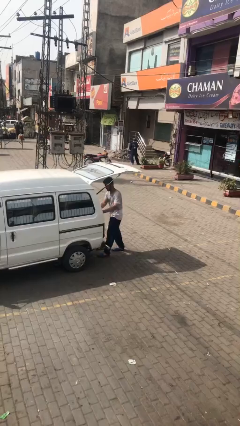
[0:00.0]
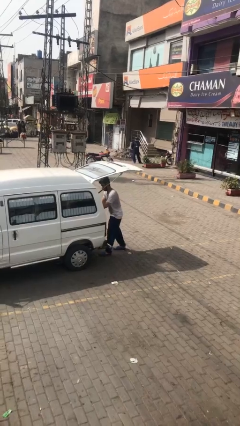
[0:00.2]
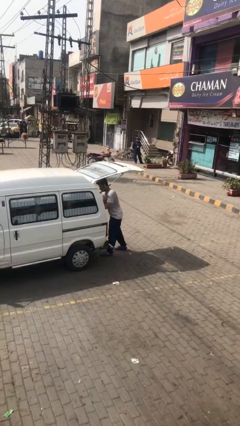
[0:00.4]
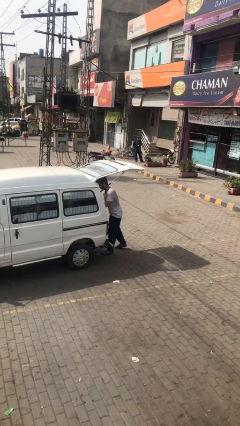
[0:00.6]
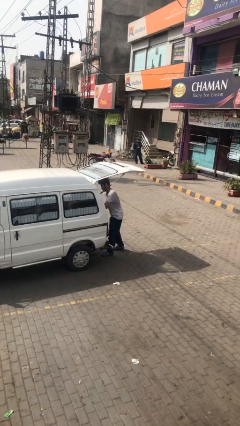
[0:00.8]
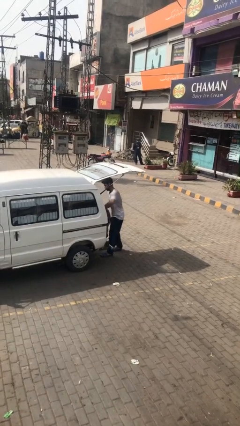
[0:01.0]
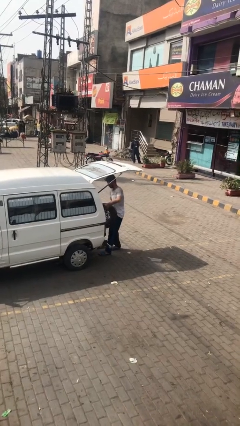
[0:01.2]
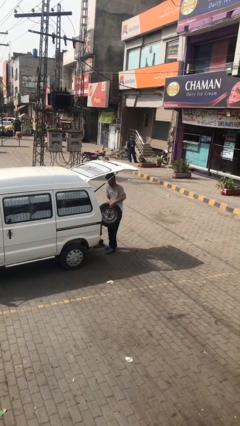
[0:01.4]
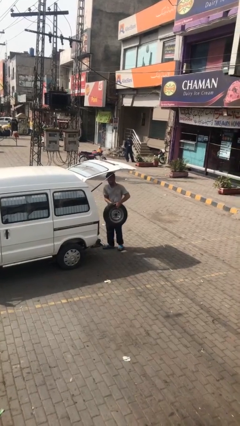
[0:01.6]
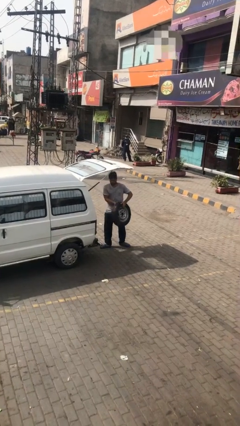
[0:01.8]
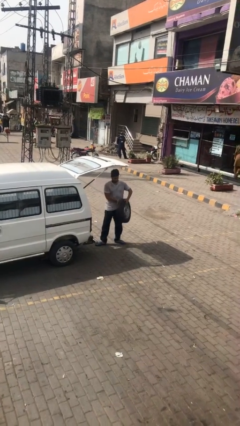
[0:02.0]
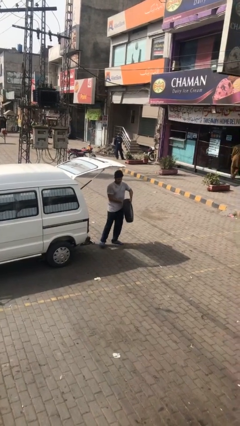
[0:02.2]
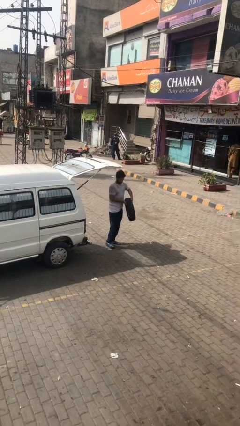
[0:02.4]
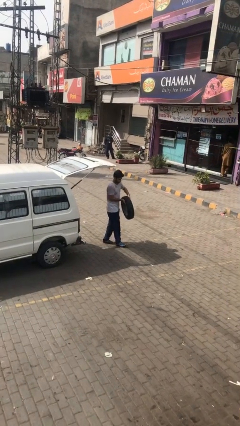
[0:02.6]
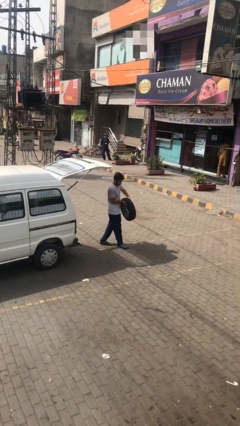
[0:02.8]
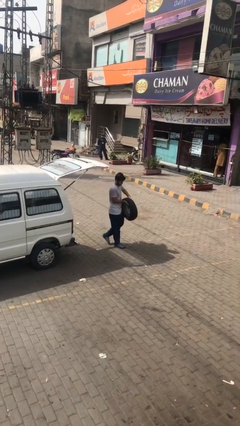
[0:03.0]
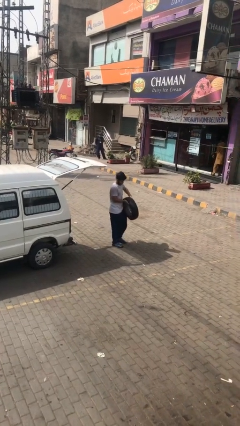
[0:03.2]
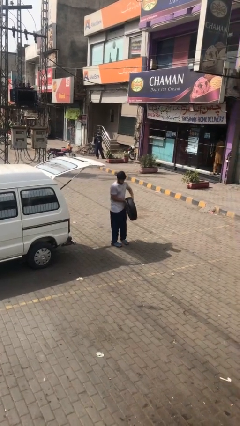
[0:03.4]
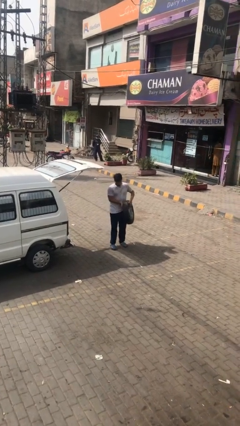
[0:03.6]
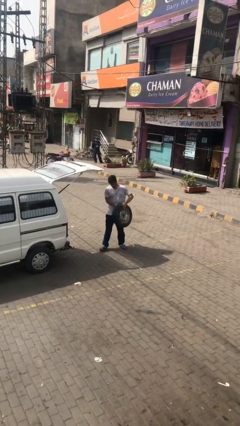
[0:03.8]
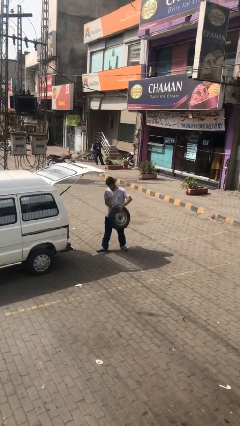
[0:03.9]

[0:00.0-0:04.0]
person unloads car

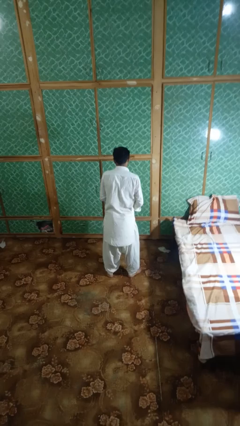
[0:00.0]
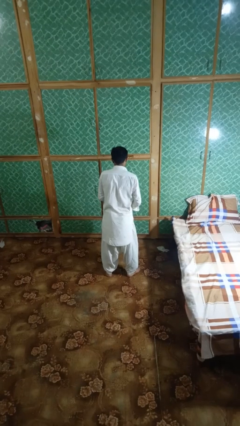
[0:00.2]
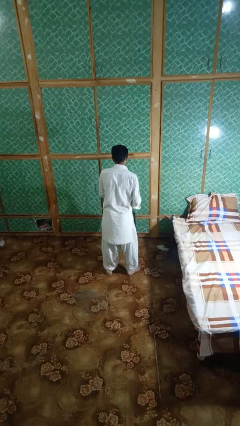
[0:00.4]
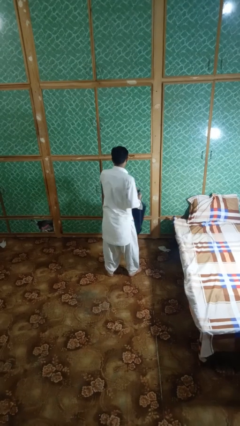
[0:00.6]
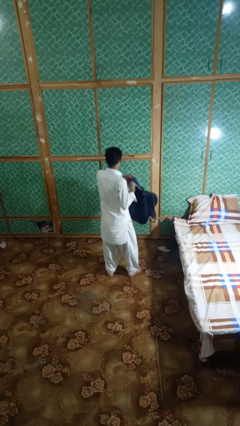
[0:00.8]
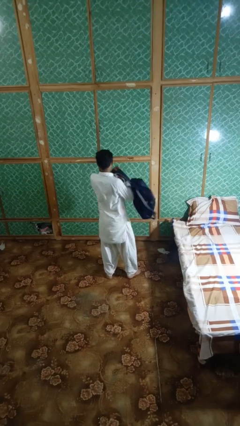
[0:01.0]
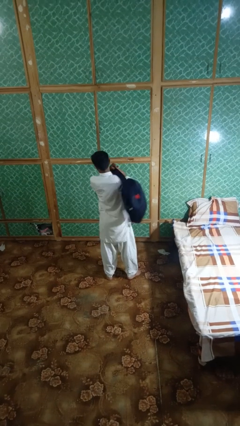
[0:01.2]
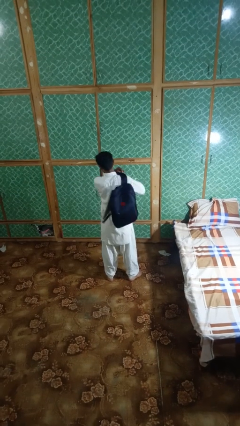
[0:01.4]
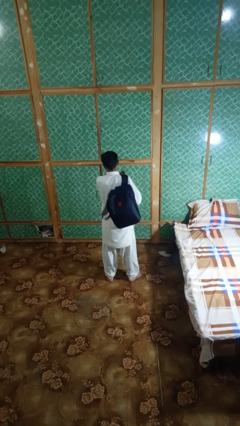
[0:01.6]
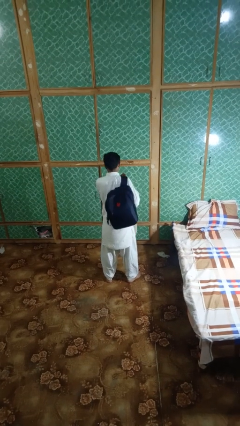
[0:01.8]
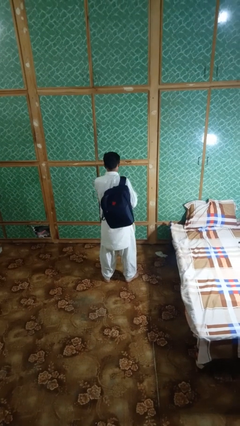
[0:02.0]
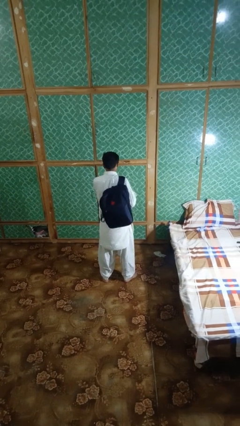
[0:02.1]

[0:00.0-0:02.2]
person puts on backpack

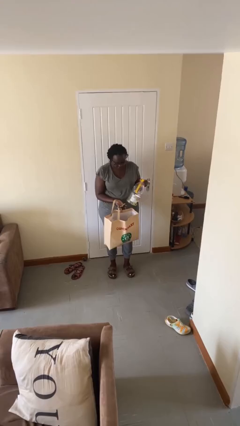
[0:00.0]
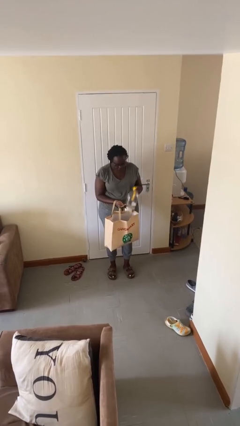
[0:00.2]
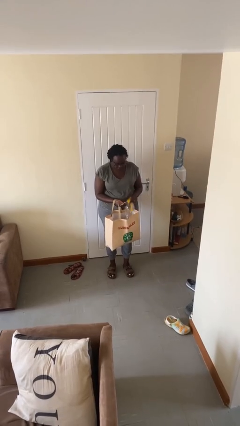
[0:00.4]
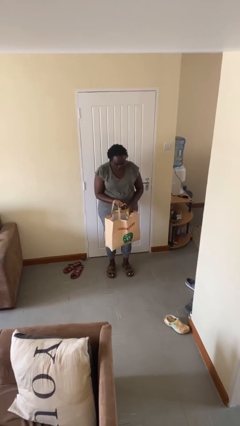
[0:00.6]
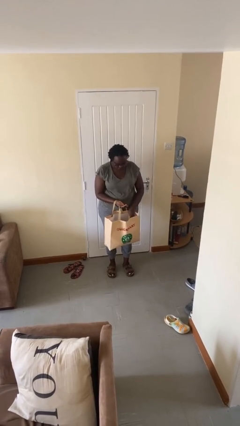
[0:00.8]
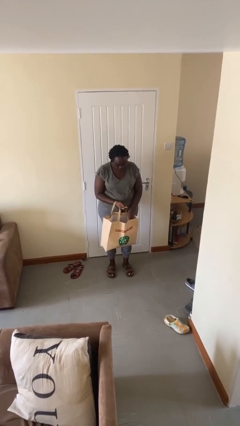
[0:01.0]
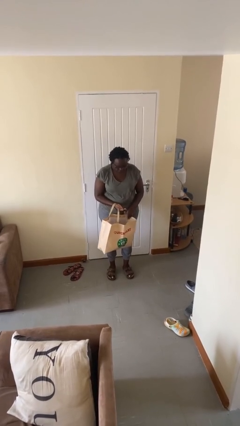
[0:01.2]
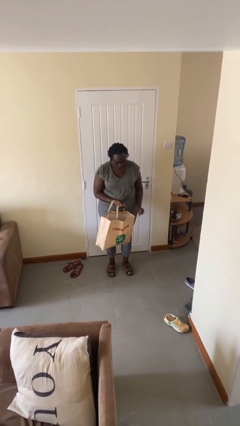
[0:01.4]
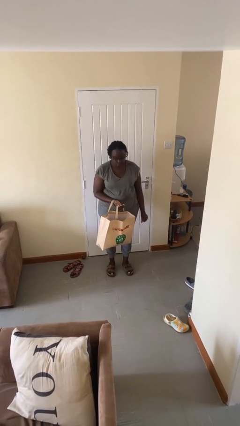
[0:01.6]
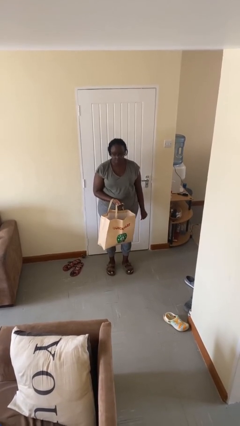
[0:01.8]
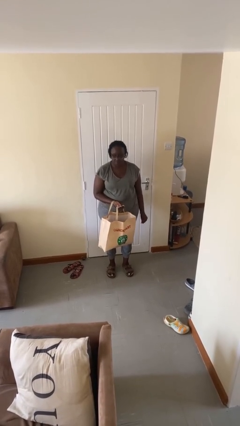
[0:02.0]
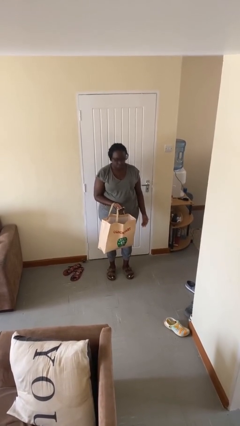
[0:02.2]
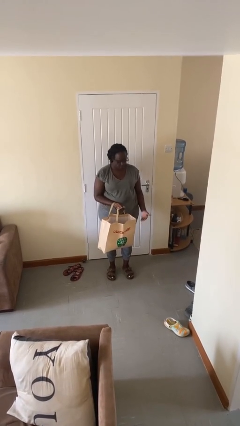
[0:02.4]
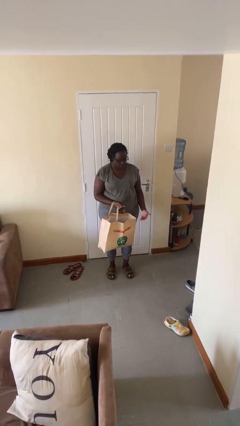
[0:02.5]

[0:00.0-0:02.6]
person puts object into bag

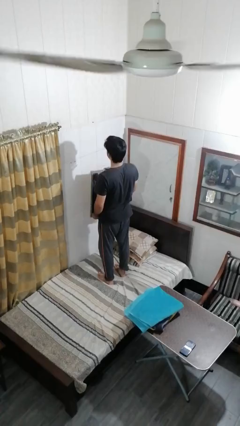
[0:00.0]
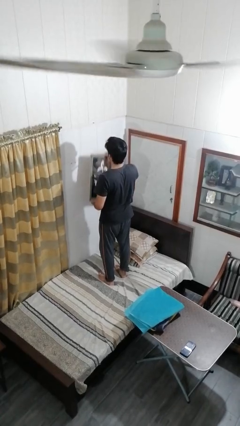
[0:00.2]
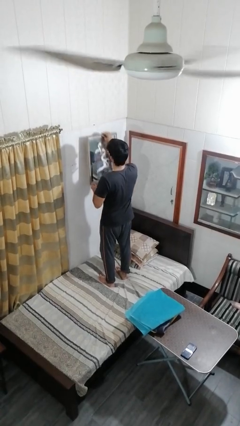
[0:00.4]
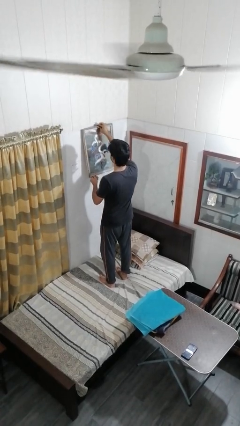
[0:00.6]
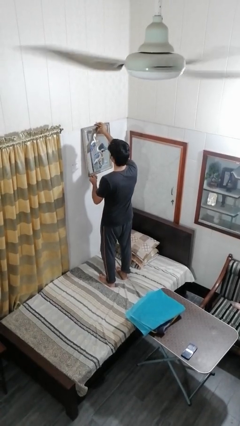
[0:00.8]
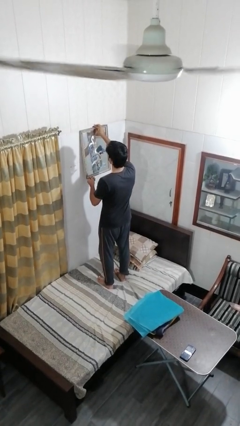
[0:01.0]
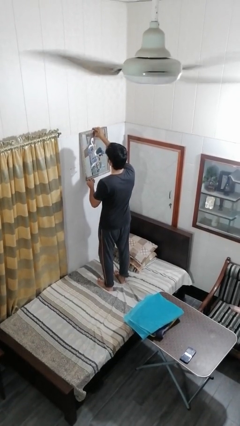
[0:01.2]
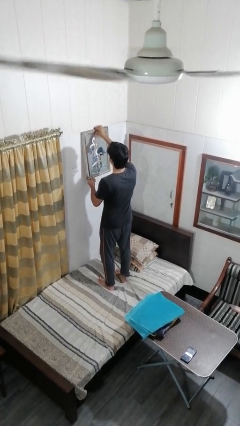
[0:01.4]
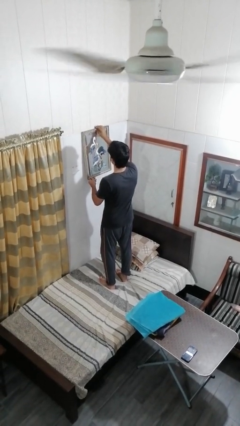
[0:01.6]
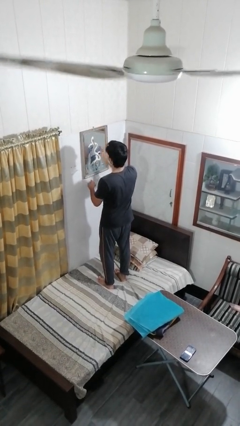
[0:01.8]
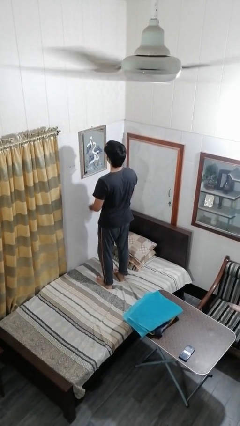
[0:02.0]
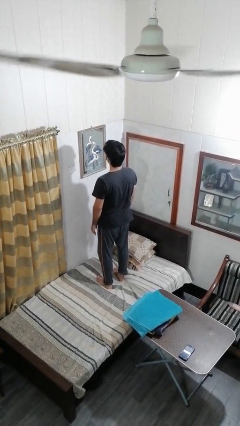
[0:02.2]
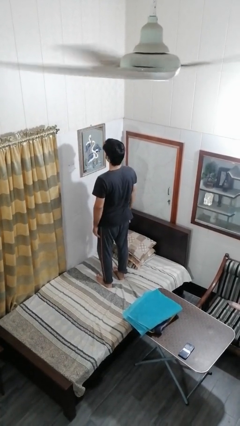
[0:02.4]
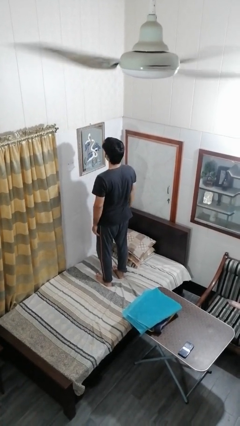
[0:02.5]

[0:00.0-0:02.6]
person puts up picture frame

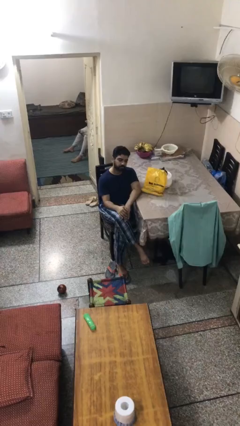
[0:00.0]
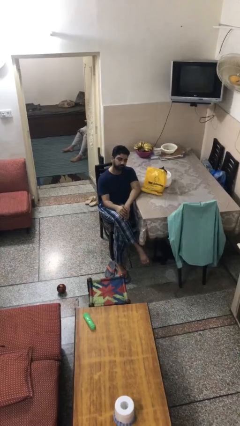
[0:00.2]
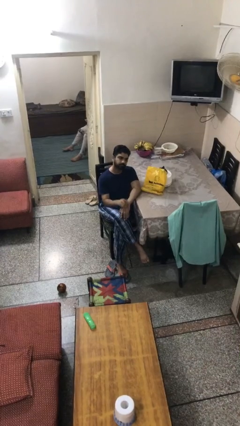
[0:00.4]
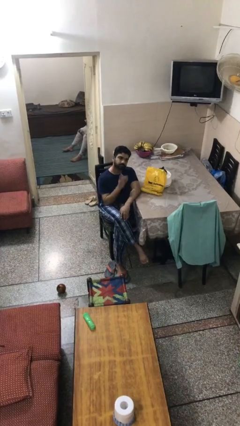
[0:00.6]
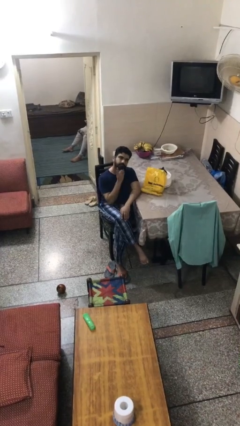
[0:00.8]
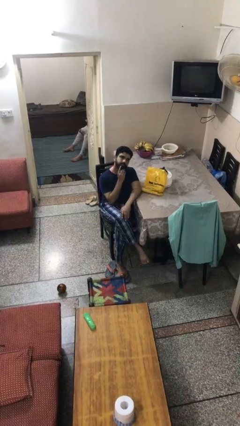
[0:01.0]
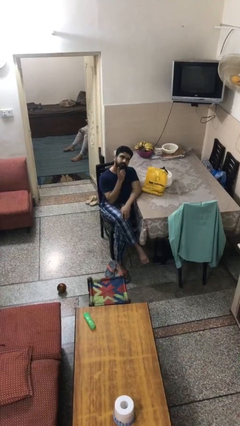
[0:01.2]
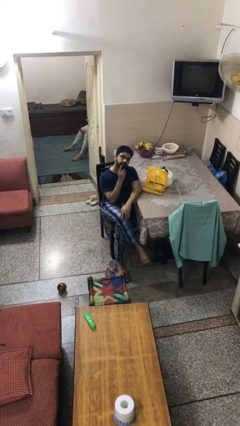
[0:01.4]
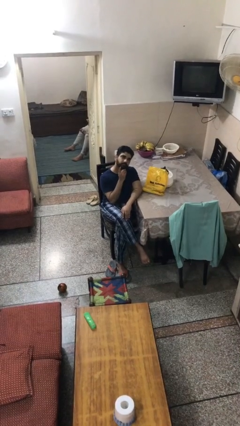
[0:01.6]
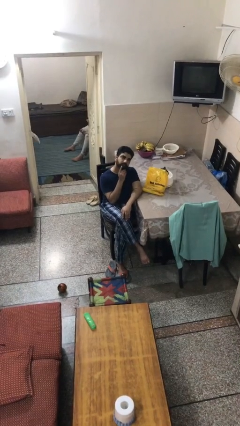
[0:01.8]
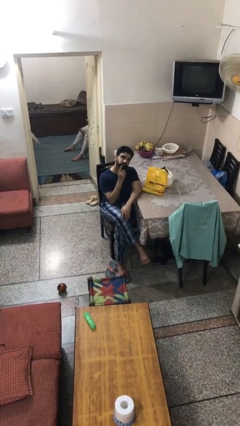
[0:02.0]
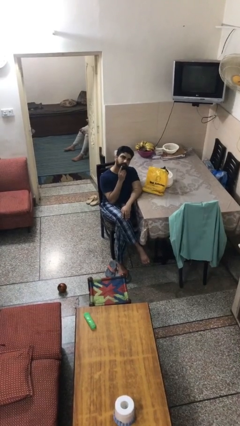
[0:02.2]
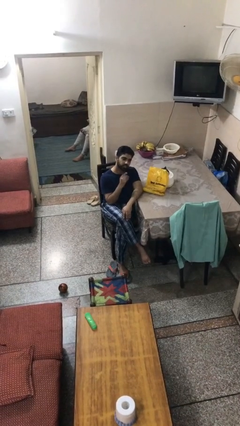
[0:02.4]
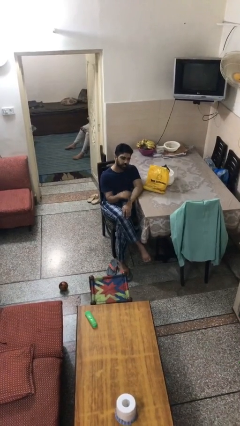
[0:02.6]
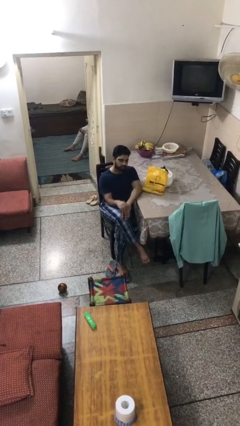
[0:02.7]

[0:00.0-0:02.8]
person strokes chin

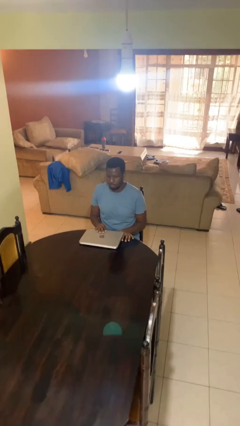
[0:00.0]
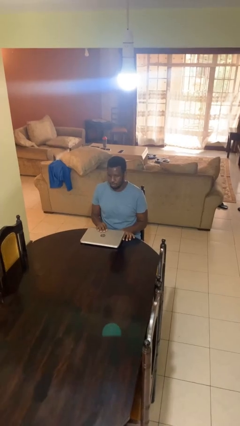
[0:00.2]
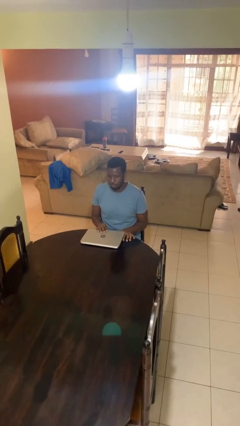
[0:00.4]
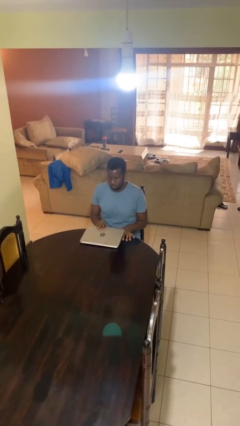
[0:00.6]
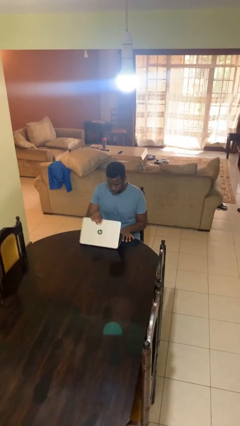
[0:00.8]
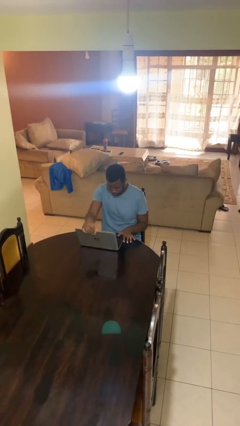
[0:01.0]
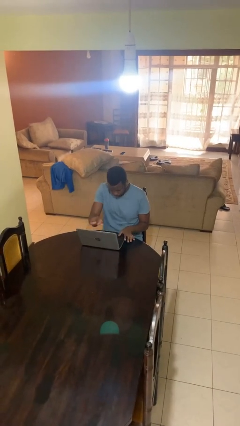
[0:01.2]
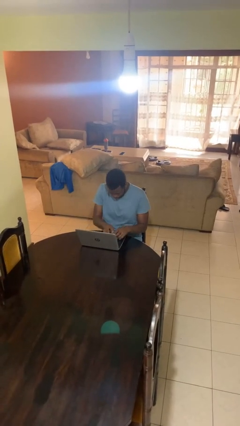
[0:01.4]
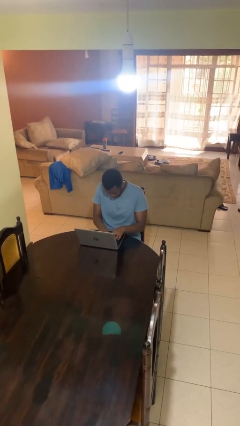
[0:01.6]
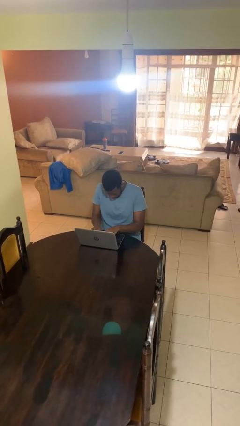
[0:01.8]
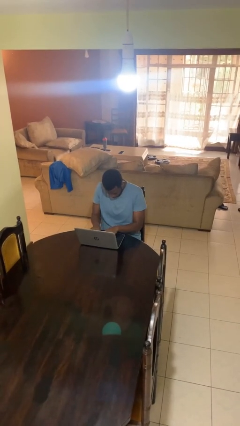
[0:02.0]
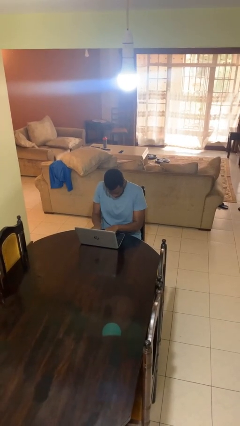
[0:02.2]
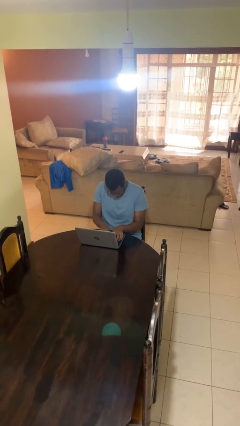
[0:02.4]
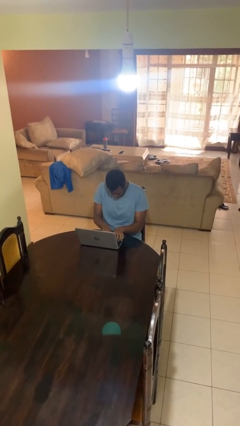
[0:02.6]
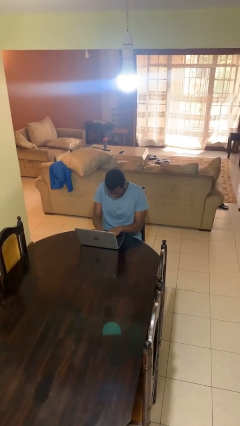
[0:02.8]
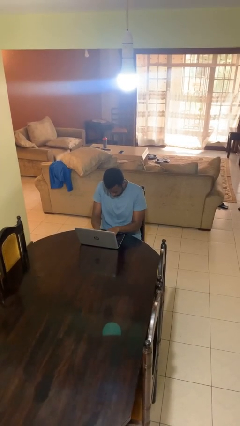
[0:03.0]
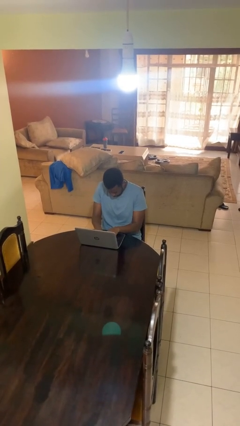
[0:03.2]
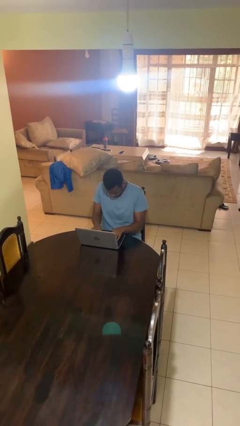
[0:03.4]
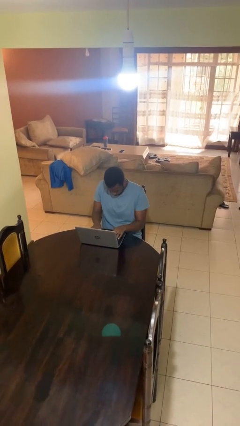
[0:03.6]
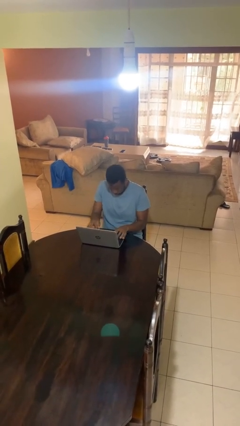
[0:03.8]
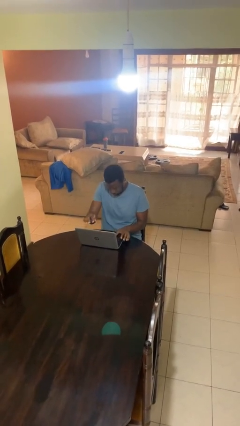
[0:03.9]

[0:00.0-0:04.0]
person interacts with laptop
